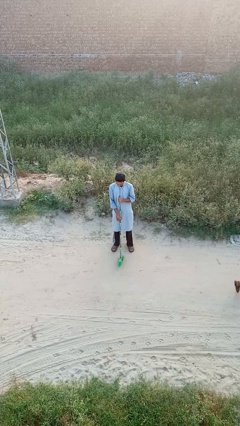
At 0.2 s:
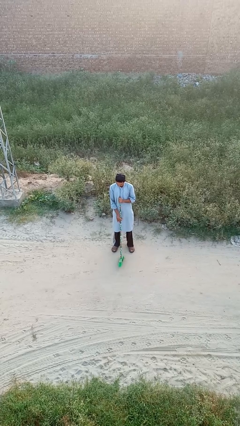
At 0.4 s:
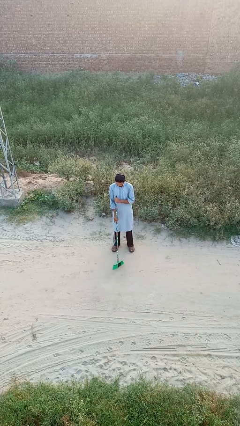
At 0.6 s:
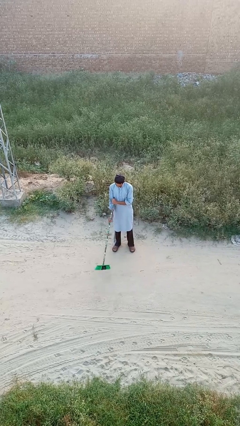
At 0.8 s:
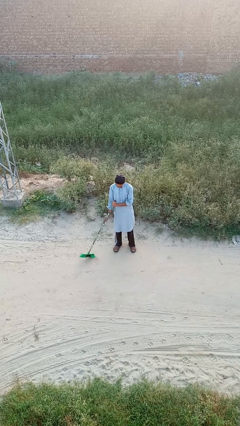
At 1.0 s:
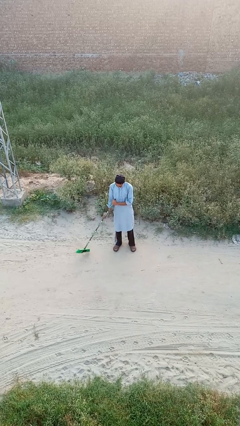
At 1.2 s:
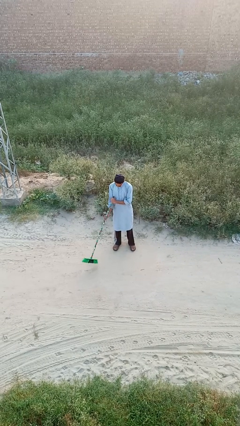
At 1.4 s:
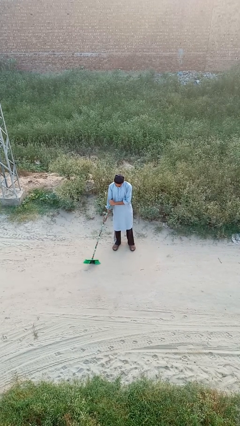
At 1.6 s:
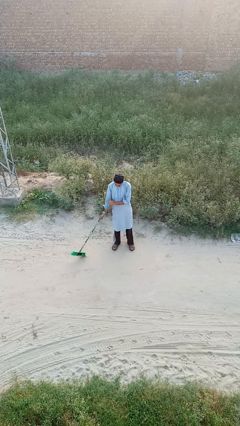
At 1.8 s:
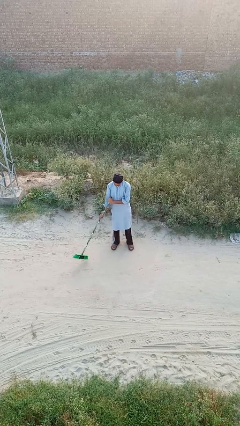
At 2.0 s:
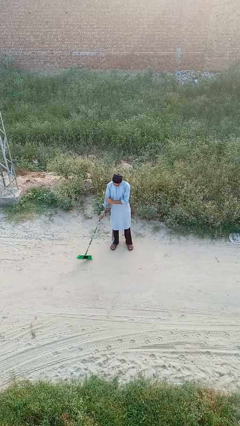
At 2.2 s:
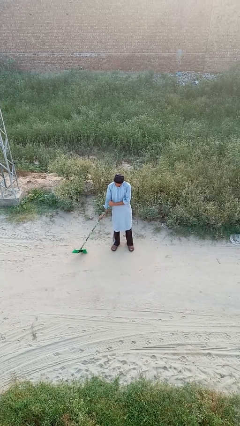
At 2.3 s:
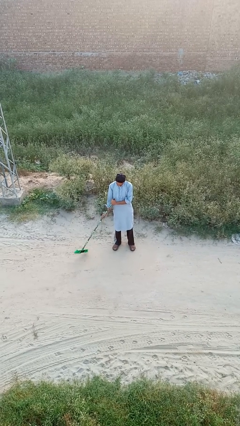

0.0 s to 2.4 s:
person sweeps floor

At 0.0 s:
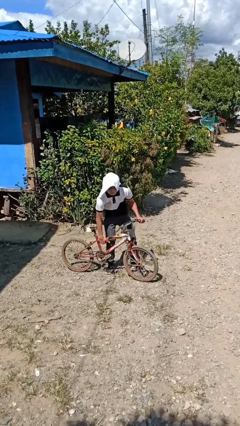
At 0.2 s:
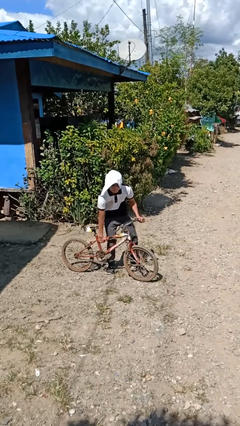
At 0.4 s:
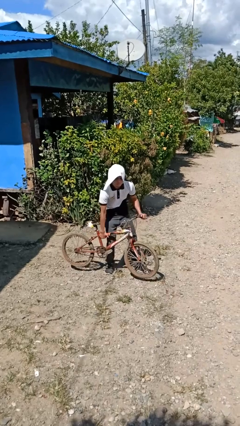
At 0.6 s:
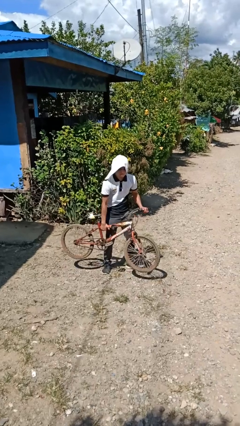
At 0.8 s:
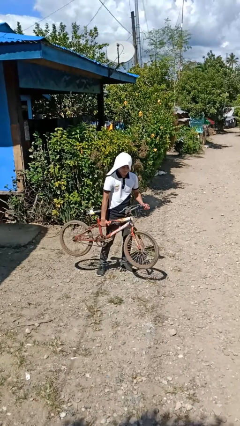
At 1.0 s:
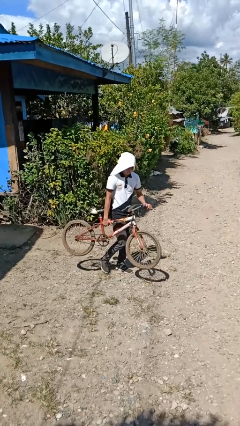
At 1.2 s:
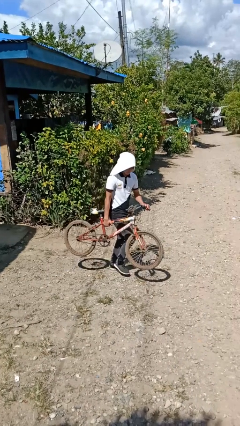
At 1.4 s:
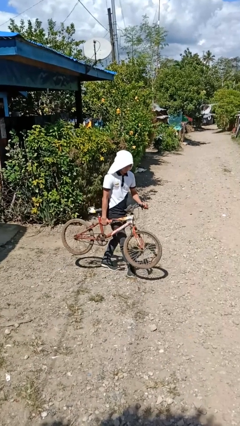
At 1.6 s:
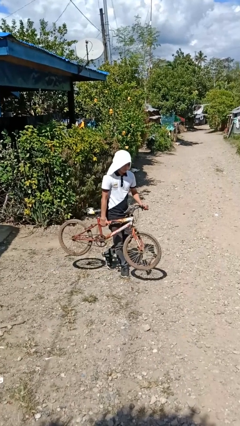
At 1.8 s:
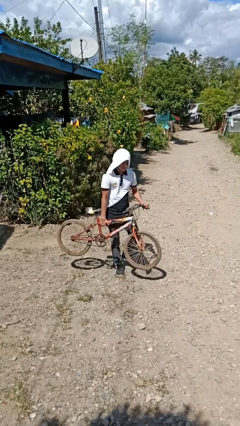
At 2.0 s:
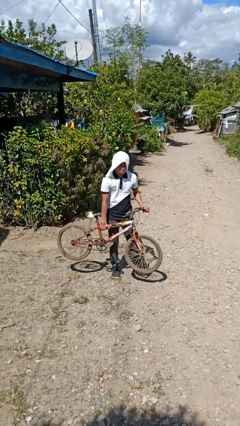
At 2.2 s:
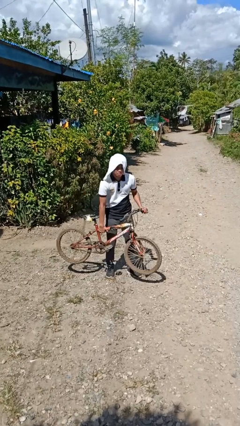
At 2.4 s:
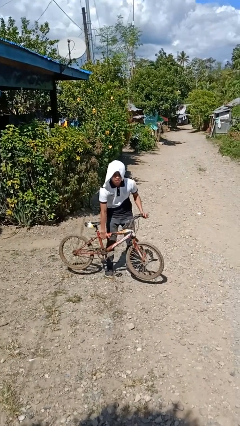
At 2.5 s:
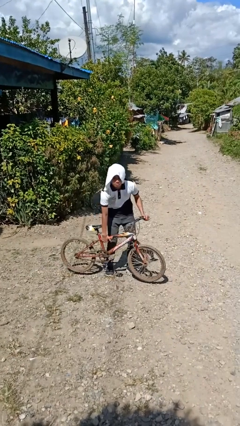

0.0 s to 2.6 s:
person carries bicycle

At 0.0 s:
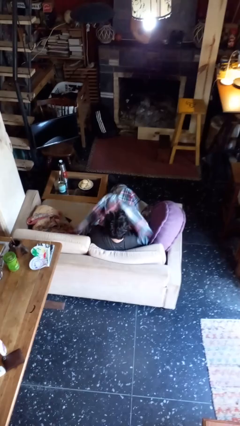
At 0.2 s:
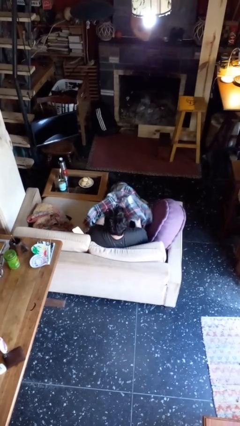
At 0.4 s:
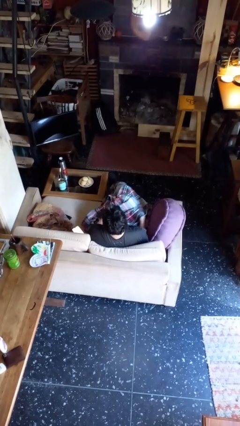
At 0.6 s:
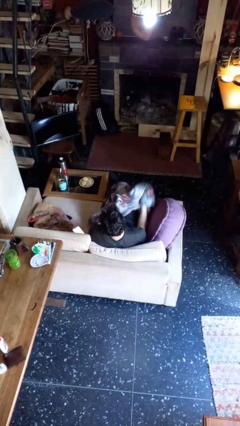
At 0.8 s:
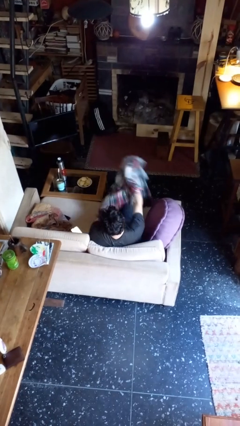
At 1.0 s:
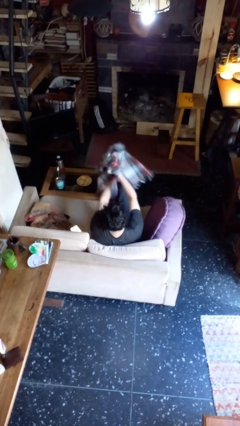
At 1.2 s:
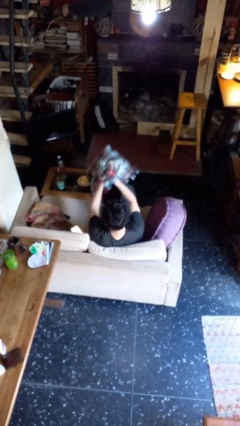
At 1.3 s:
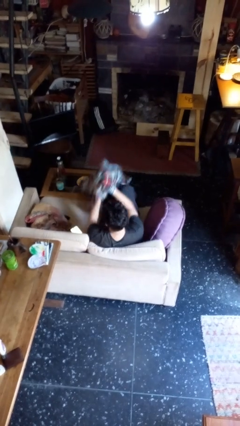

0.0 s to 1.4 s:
person uncovers with blanket

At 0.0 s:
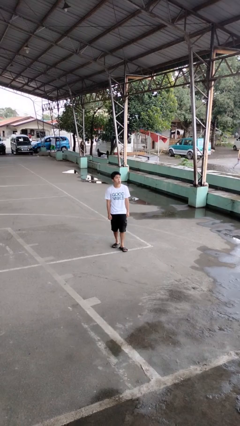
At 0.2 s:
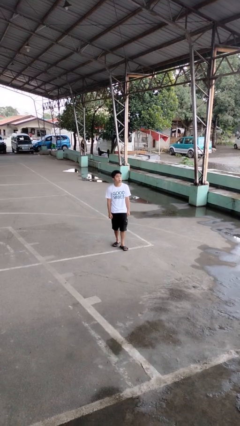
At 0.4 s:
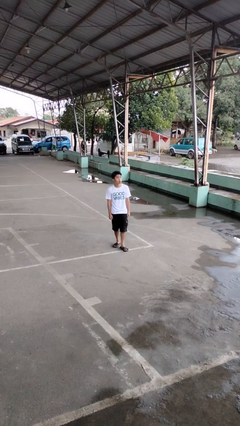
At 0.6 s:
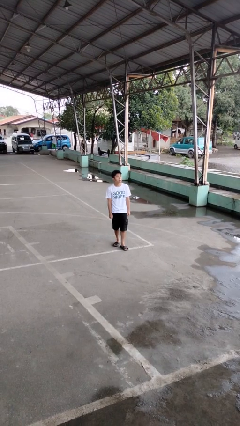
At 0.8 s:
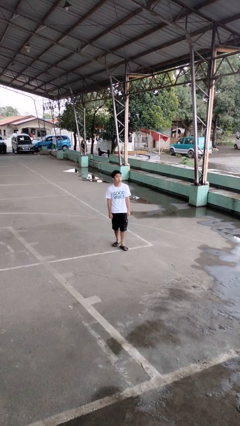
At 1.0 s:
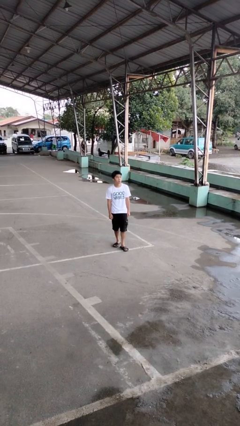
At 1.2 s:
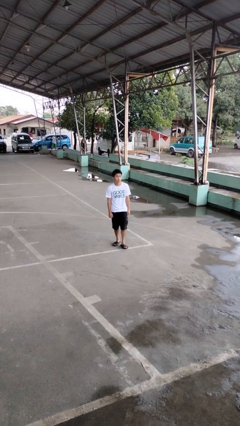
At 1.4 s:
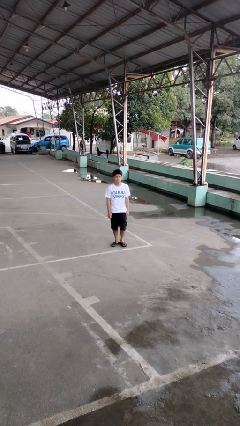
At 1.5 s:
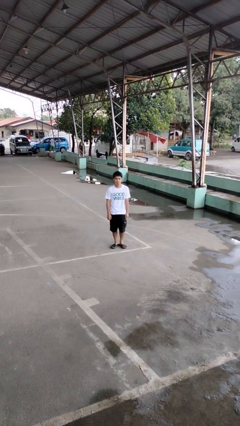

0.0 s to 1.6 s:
person sticks out tongue

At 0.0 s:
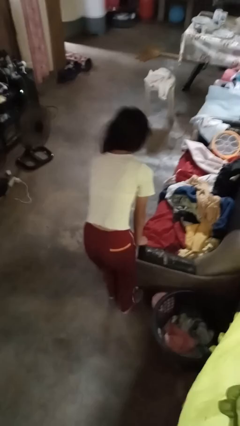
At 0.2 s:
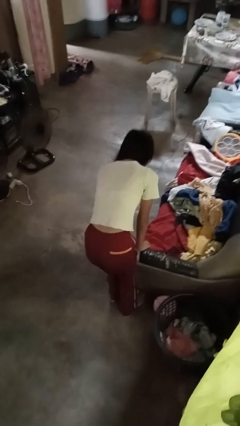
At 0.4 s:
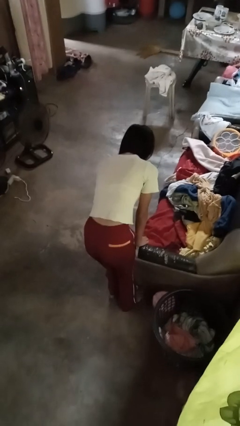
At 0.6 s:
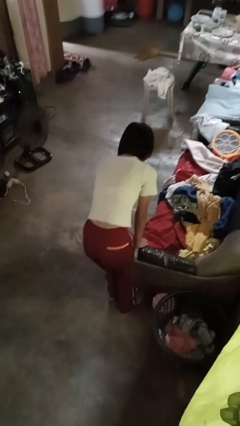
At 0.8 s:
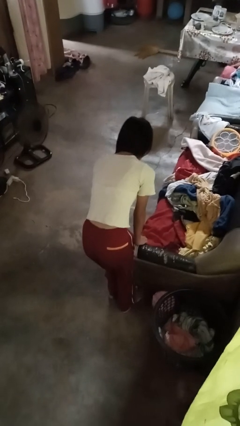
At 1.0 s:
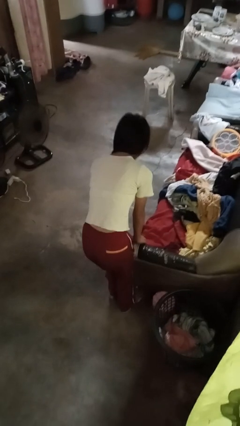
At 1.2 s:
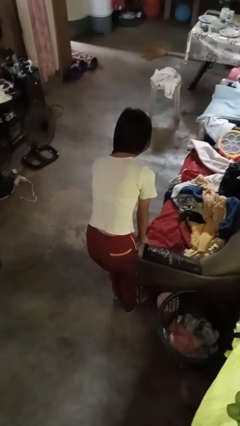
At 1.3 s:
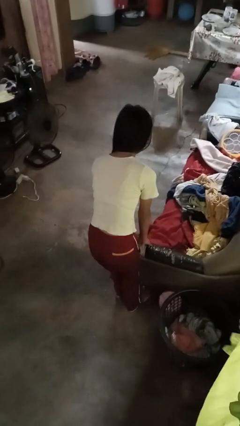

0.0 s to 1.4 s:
person stubs toe

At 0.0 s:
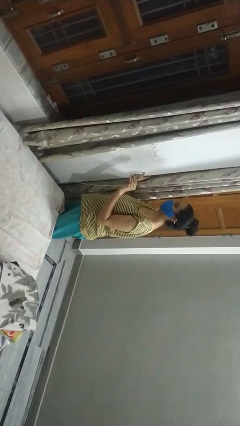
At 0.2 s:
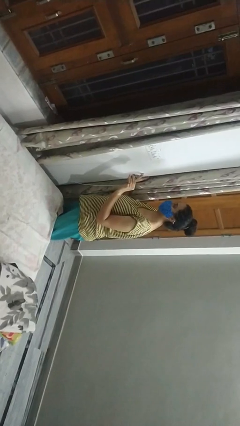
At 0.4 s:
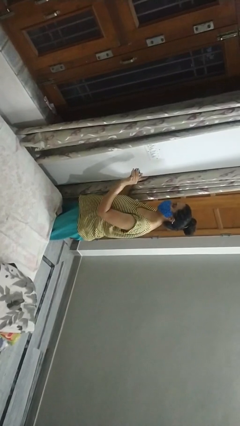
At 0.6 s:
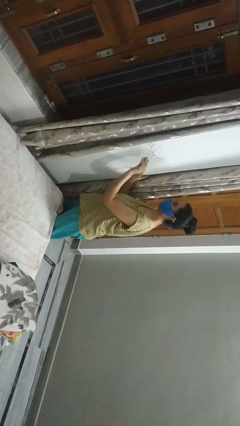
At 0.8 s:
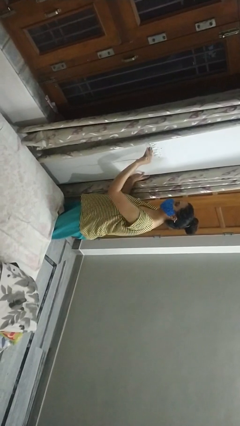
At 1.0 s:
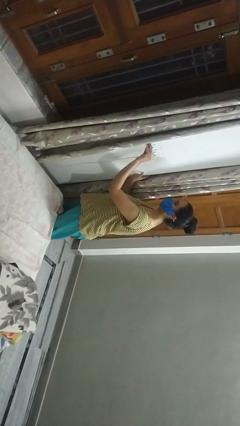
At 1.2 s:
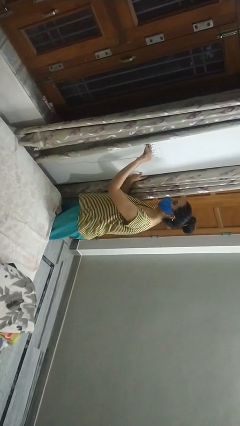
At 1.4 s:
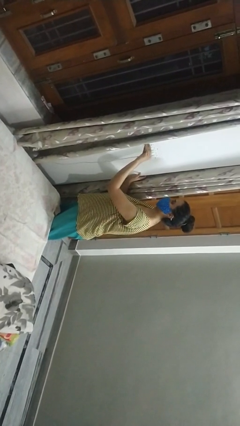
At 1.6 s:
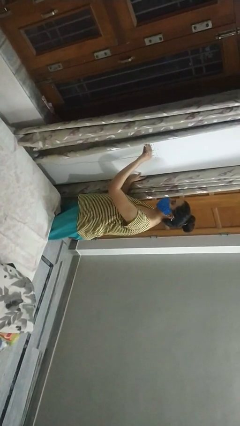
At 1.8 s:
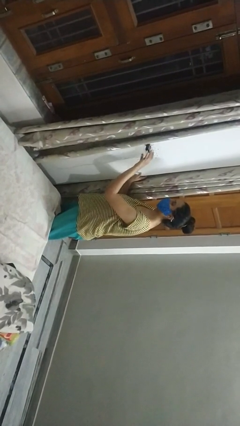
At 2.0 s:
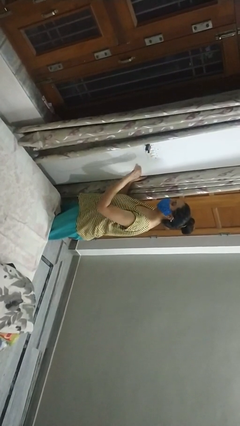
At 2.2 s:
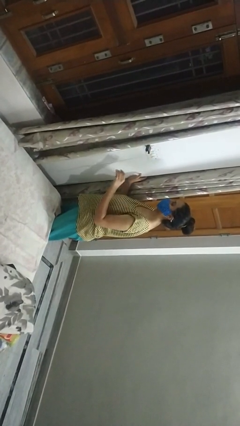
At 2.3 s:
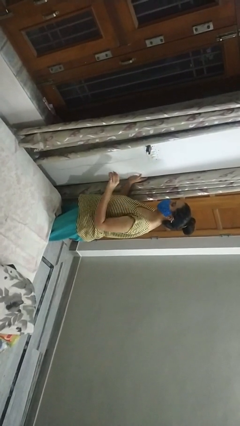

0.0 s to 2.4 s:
person plugs into electrical socket

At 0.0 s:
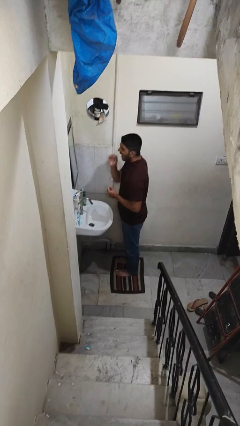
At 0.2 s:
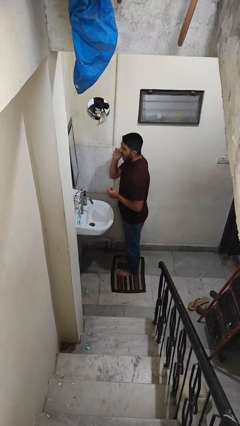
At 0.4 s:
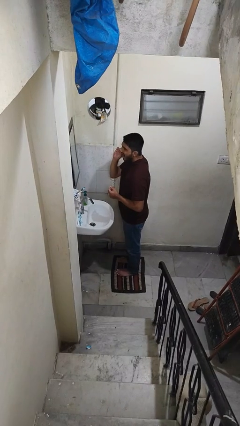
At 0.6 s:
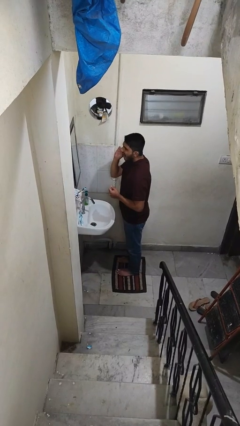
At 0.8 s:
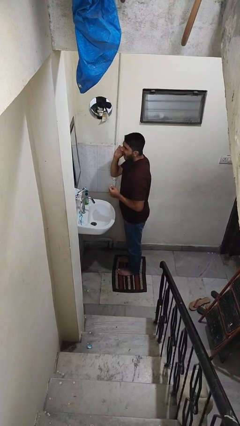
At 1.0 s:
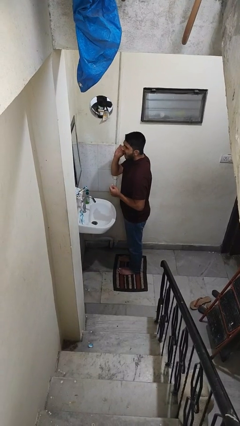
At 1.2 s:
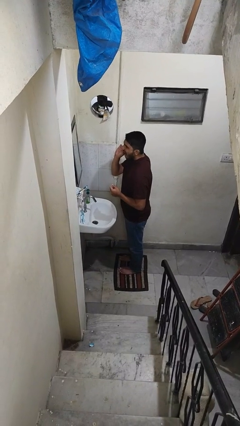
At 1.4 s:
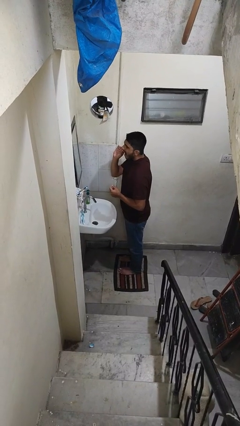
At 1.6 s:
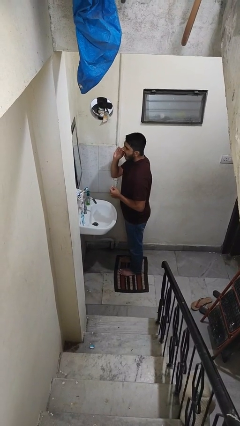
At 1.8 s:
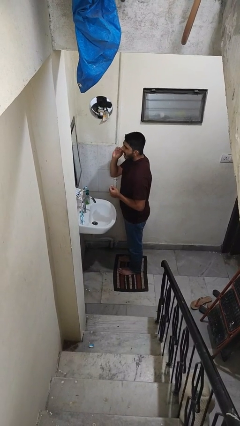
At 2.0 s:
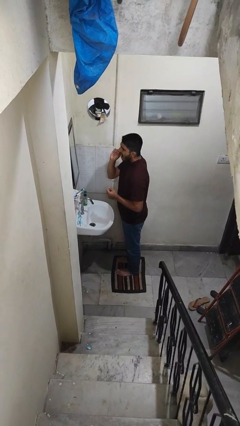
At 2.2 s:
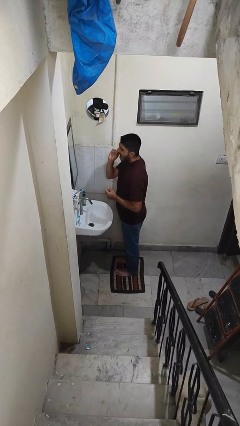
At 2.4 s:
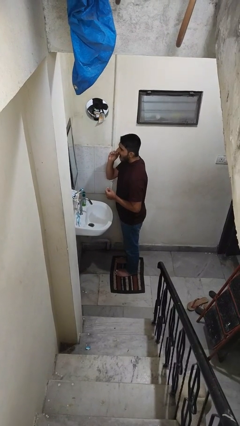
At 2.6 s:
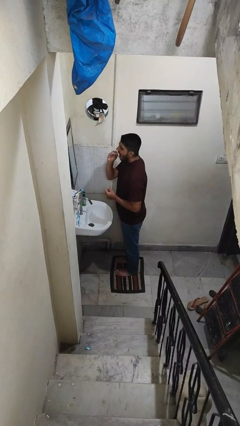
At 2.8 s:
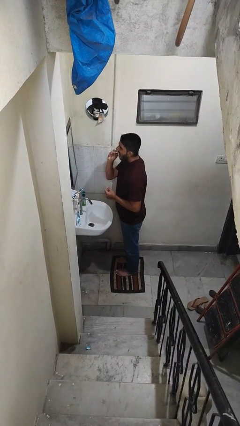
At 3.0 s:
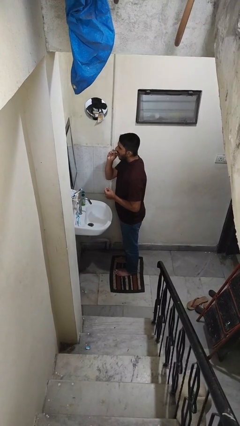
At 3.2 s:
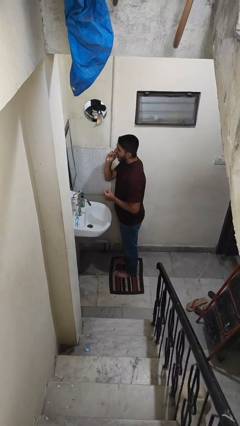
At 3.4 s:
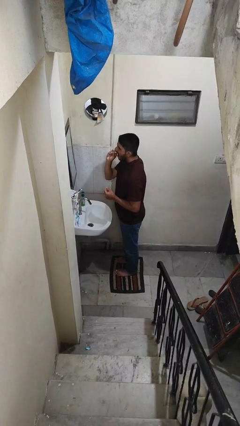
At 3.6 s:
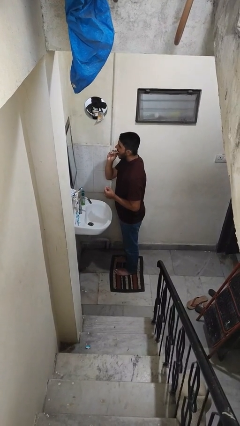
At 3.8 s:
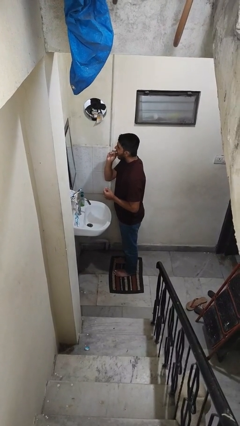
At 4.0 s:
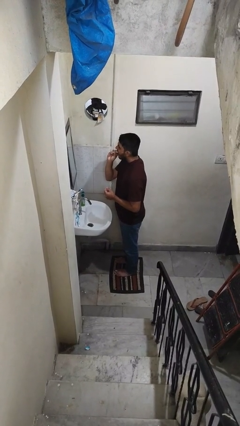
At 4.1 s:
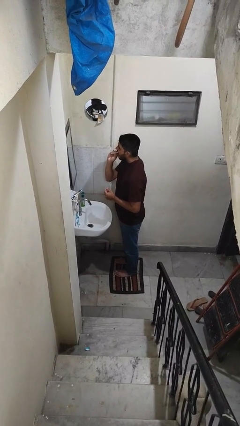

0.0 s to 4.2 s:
person flosses

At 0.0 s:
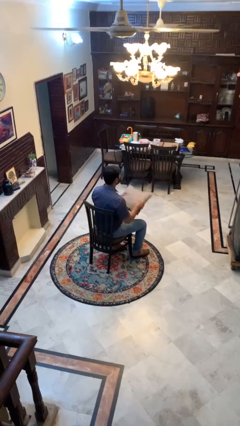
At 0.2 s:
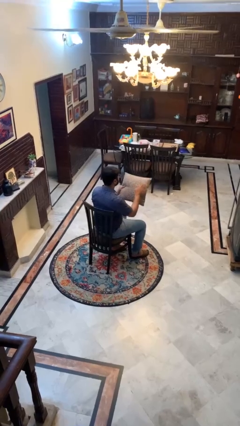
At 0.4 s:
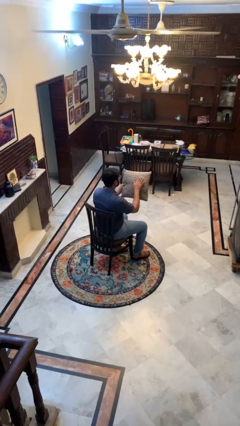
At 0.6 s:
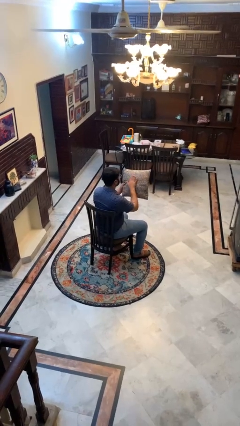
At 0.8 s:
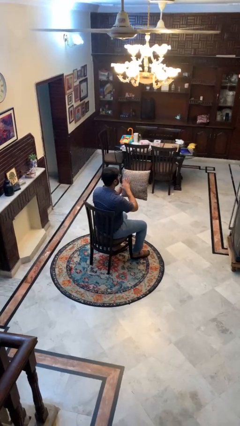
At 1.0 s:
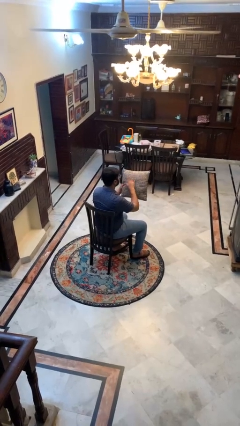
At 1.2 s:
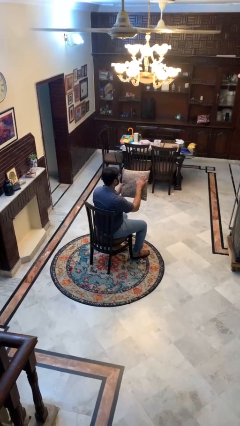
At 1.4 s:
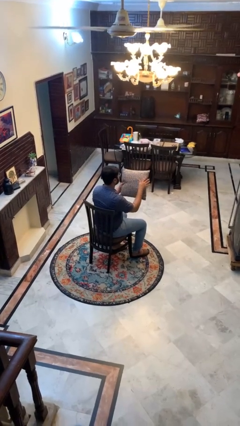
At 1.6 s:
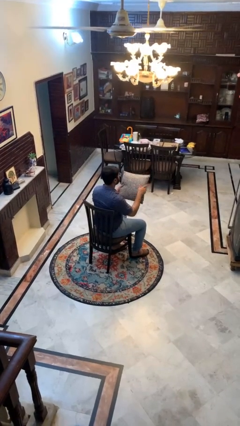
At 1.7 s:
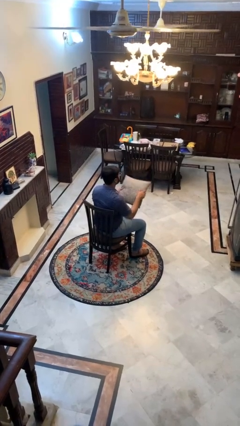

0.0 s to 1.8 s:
person waves hand over object
